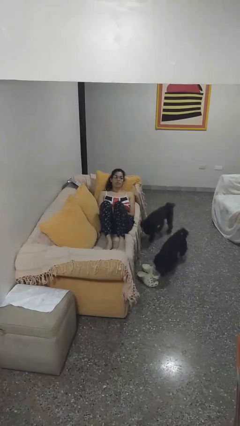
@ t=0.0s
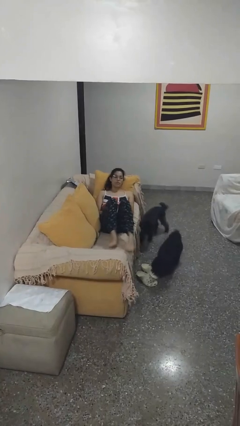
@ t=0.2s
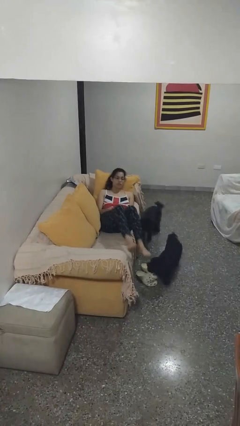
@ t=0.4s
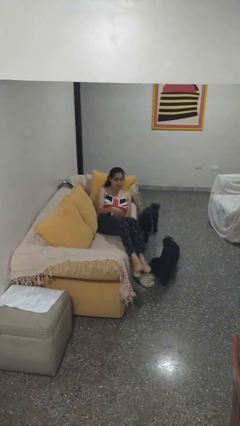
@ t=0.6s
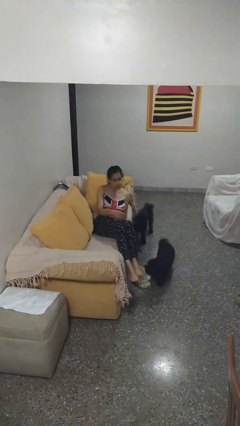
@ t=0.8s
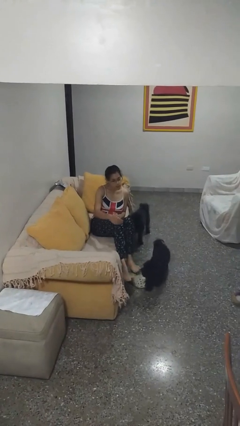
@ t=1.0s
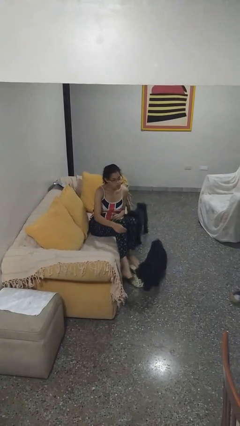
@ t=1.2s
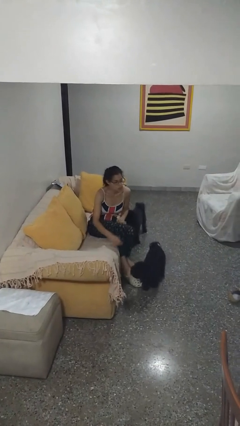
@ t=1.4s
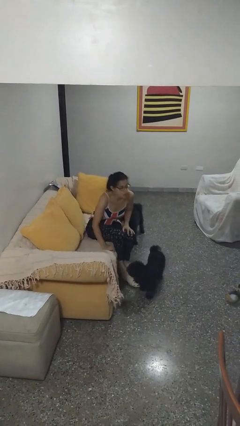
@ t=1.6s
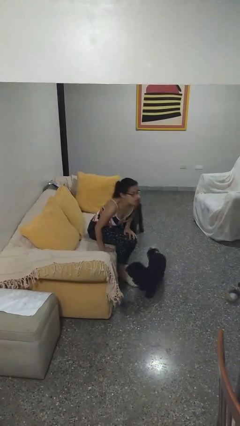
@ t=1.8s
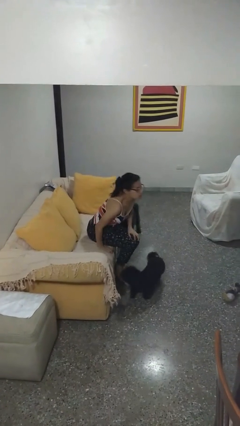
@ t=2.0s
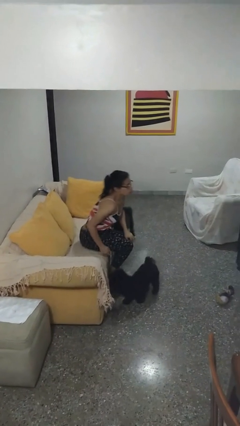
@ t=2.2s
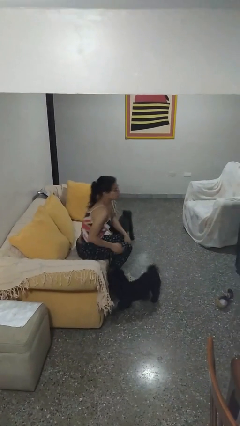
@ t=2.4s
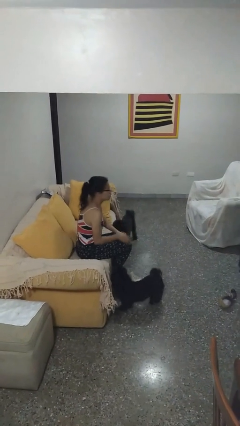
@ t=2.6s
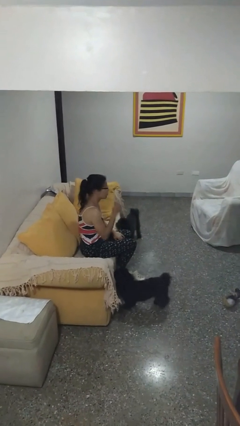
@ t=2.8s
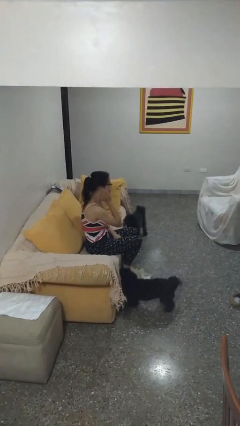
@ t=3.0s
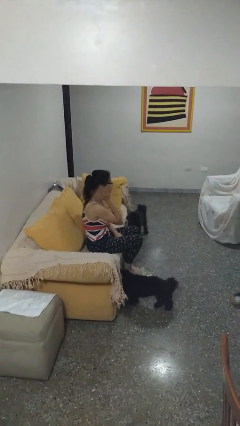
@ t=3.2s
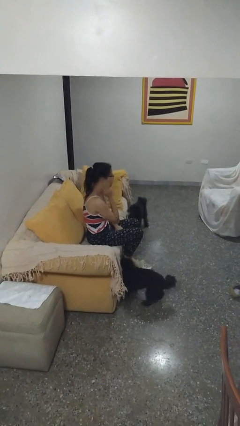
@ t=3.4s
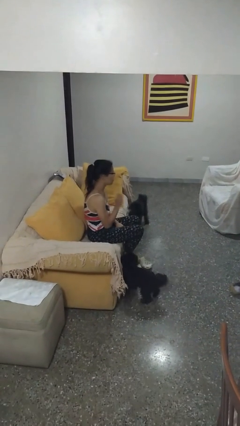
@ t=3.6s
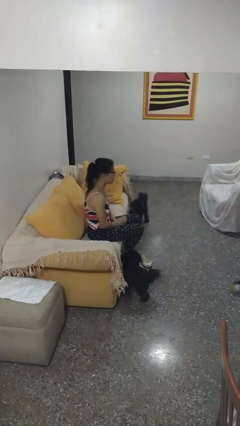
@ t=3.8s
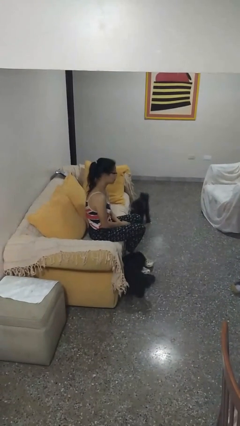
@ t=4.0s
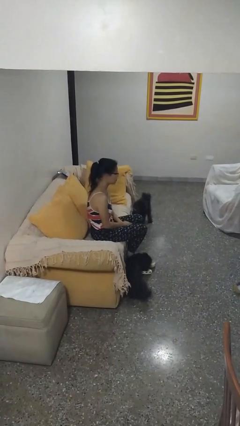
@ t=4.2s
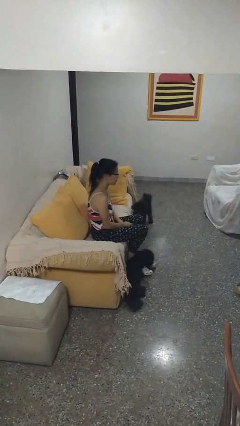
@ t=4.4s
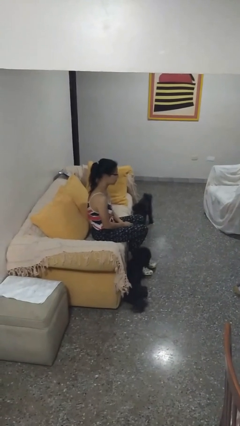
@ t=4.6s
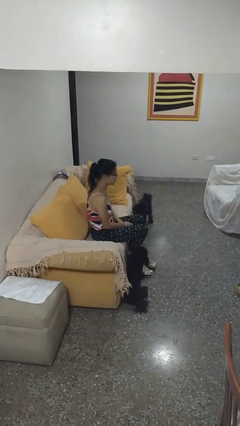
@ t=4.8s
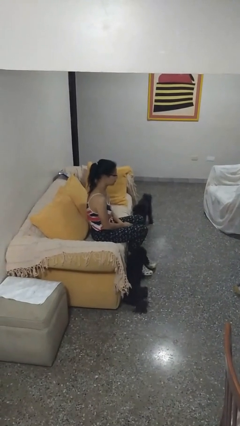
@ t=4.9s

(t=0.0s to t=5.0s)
person stands up

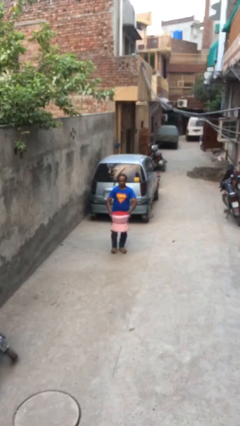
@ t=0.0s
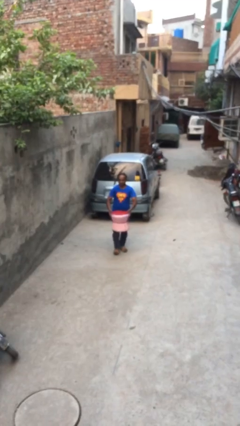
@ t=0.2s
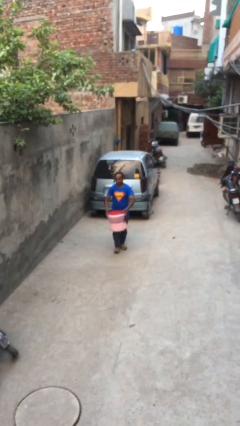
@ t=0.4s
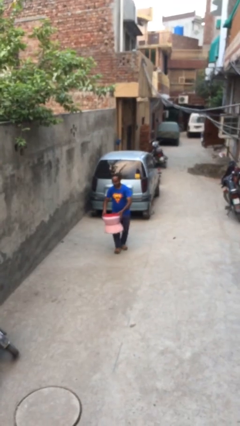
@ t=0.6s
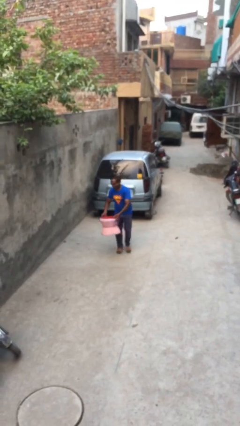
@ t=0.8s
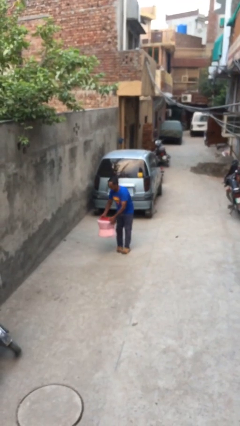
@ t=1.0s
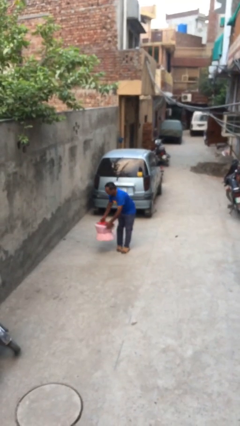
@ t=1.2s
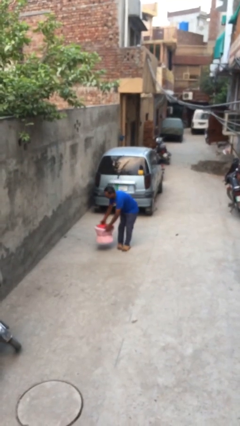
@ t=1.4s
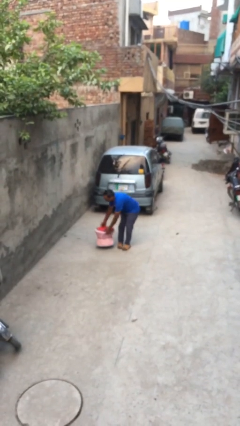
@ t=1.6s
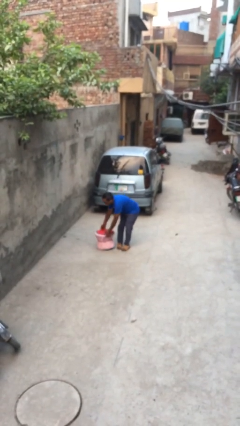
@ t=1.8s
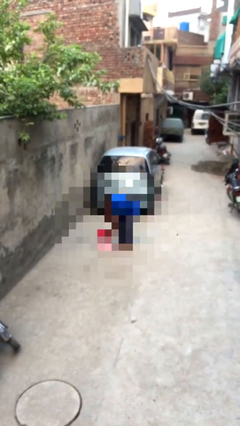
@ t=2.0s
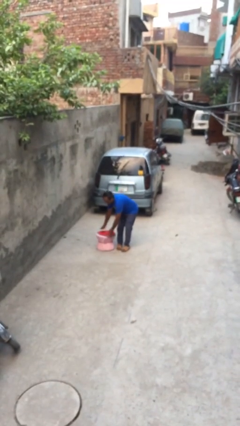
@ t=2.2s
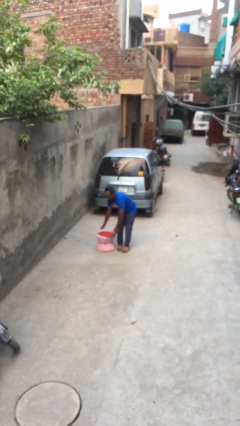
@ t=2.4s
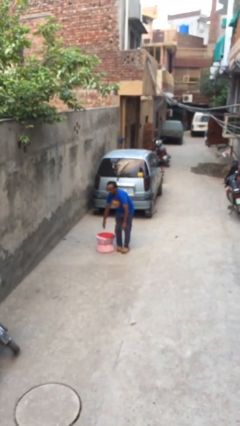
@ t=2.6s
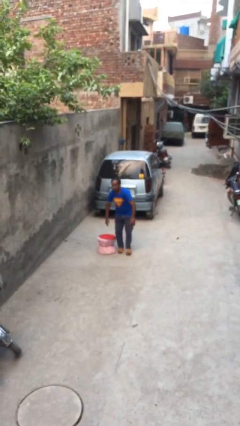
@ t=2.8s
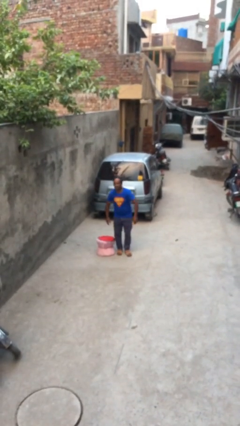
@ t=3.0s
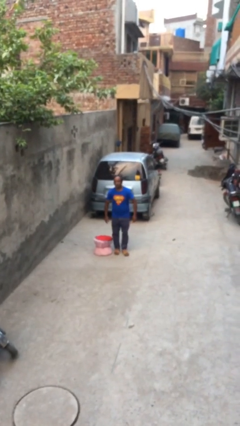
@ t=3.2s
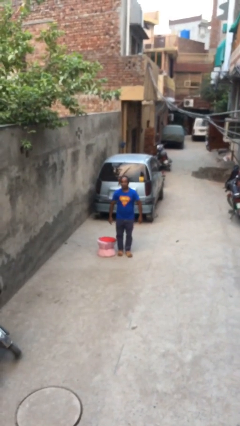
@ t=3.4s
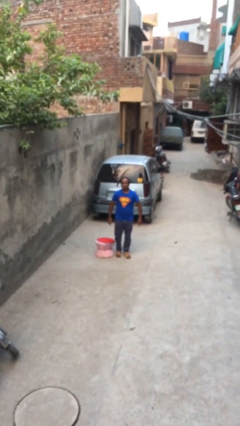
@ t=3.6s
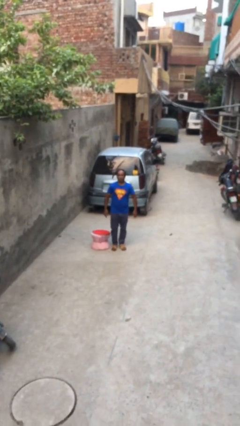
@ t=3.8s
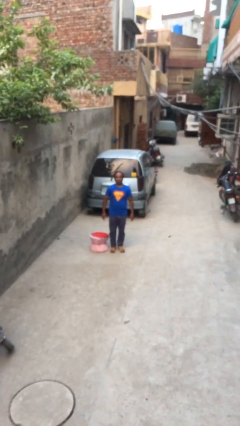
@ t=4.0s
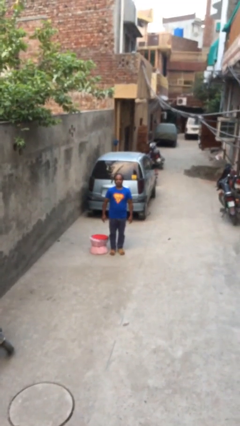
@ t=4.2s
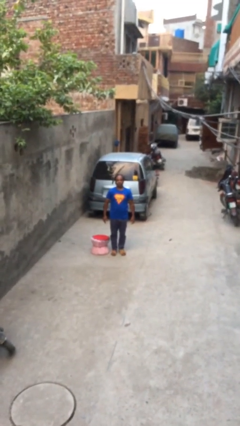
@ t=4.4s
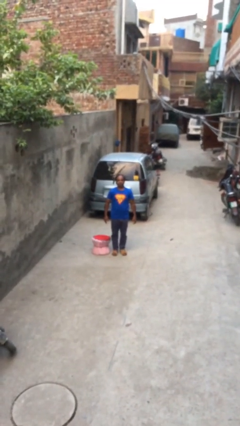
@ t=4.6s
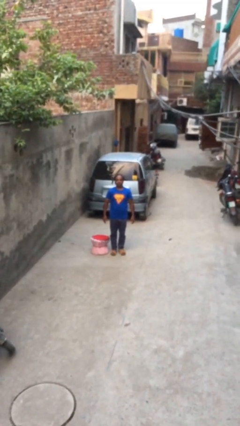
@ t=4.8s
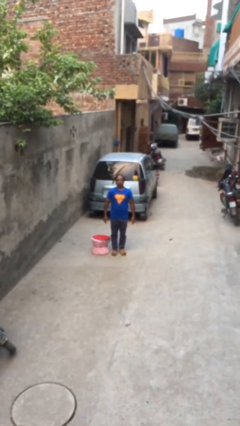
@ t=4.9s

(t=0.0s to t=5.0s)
person puts down object on floor

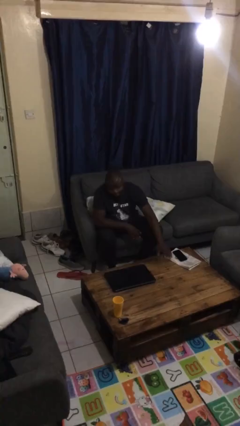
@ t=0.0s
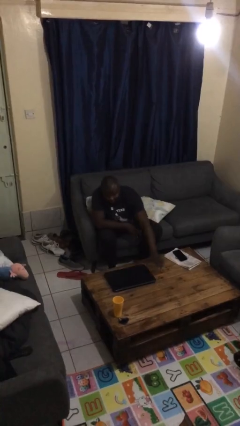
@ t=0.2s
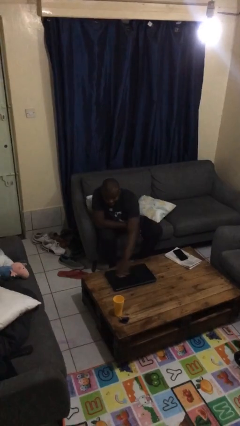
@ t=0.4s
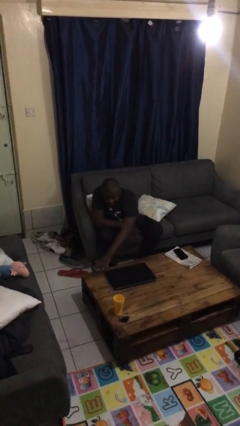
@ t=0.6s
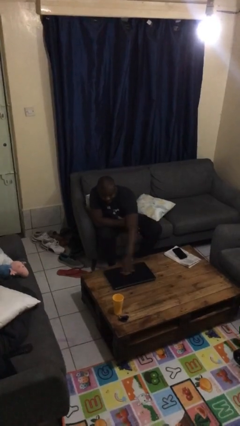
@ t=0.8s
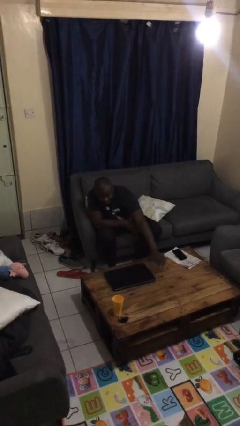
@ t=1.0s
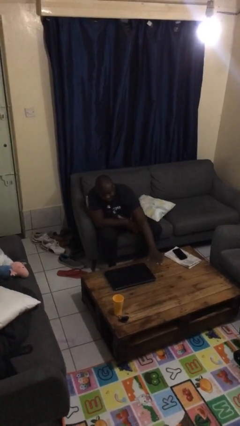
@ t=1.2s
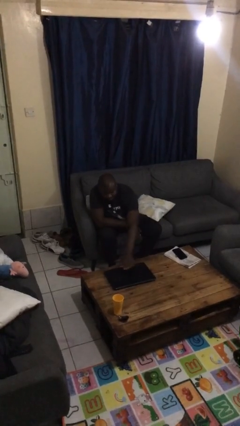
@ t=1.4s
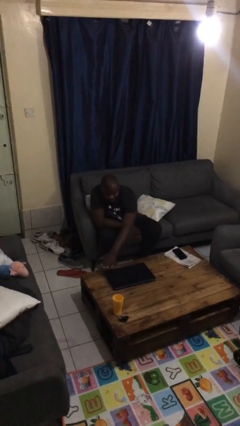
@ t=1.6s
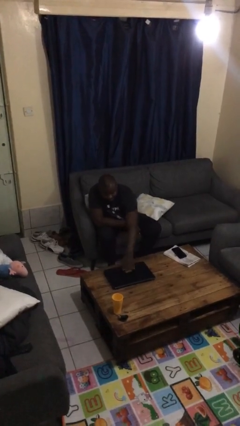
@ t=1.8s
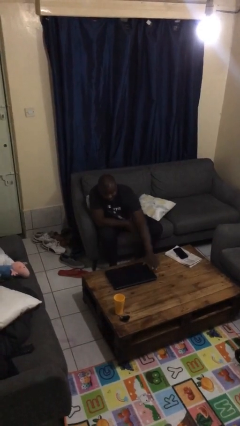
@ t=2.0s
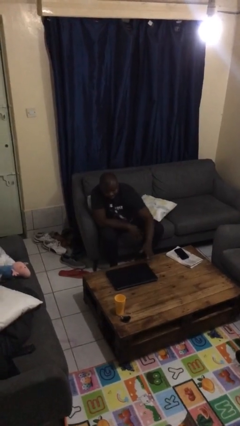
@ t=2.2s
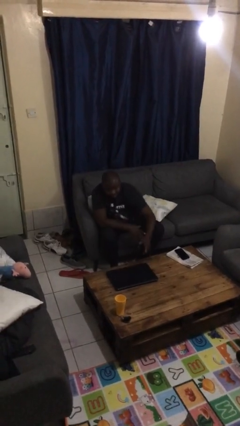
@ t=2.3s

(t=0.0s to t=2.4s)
person waves hand over object

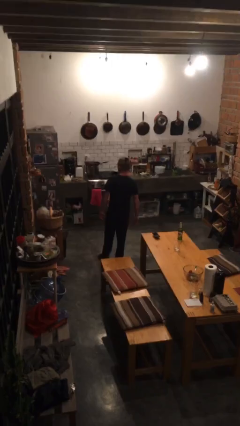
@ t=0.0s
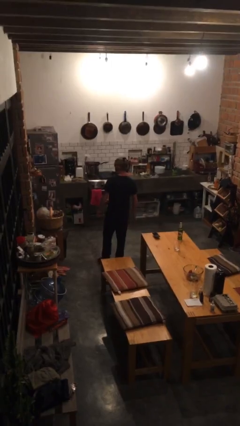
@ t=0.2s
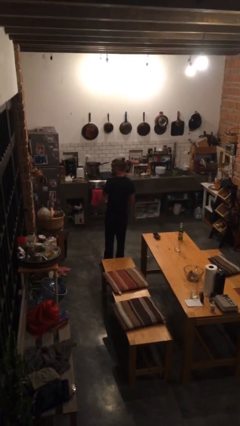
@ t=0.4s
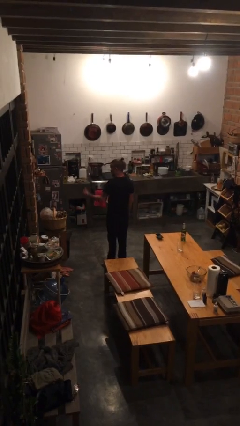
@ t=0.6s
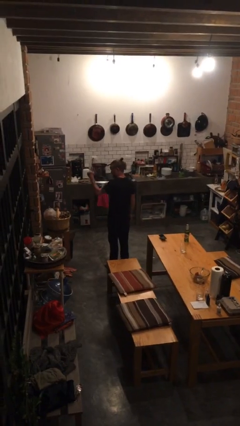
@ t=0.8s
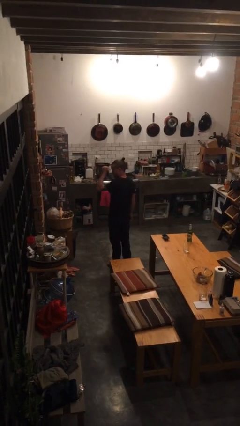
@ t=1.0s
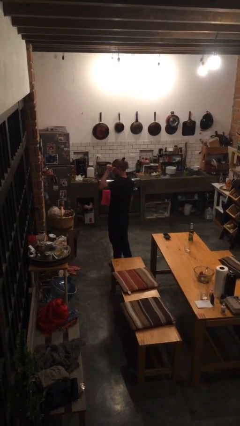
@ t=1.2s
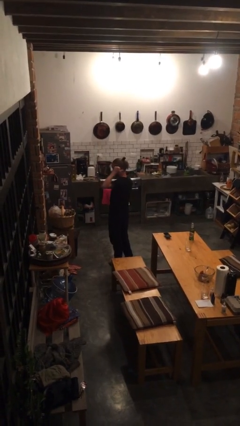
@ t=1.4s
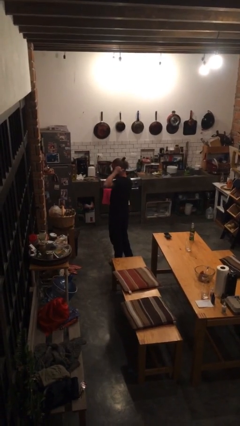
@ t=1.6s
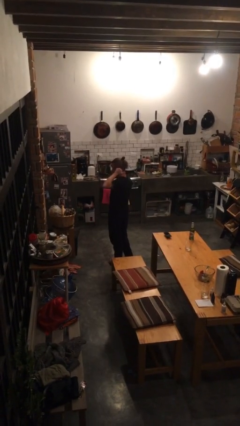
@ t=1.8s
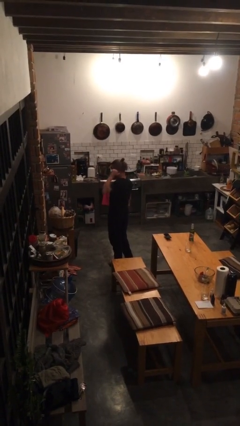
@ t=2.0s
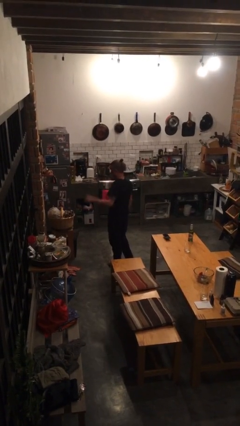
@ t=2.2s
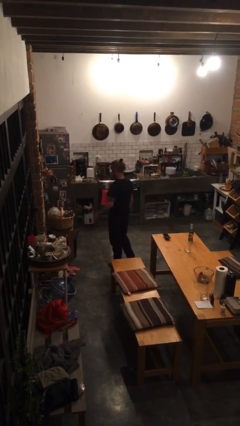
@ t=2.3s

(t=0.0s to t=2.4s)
person gestures behind me

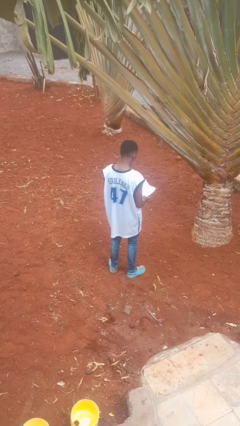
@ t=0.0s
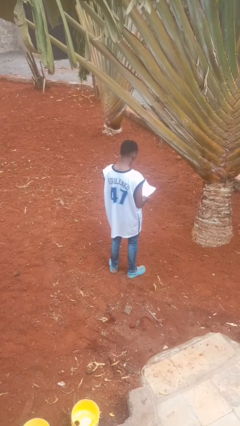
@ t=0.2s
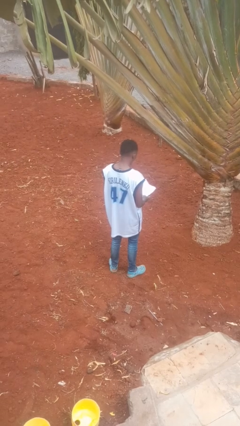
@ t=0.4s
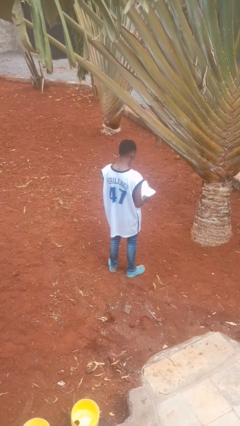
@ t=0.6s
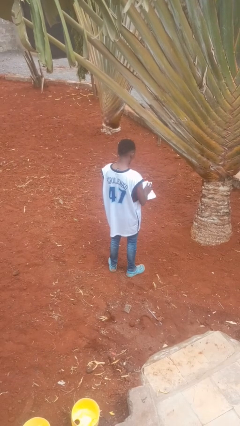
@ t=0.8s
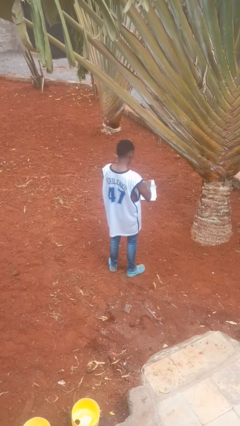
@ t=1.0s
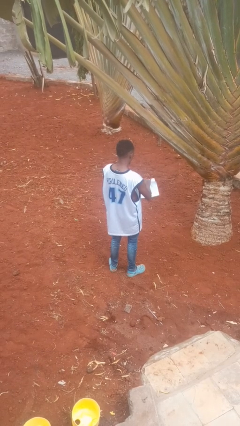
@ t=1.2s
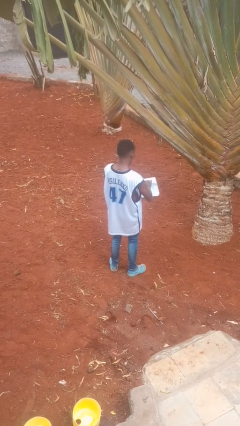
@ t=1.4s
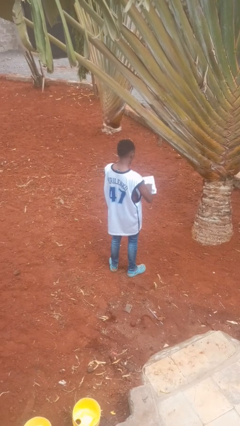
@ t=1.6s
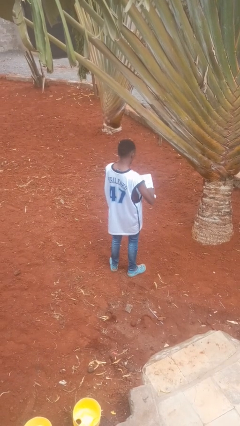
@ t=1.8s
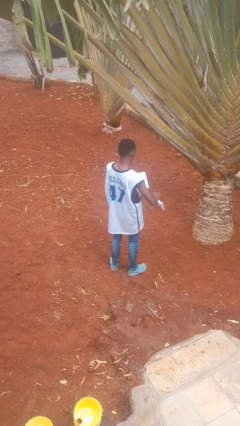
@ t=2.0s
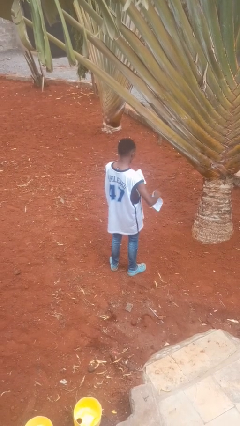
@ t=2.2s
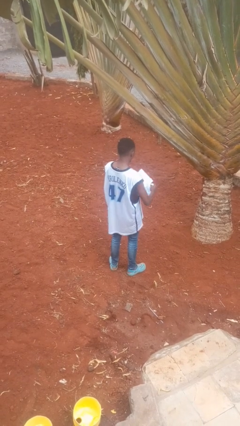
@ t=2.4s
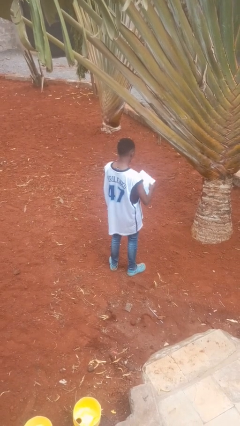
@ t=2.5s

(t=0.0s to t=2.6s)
person tears paper
